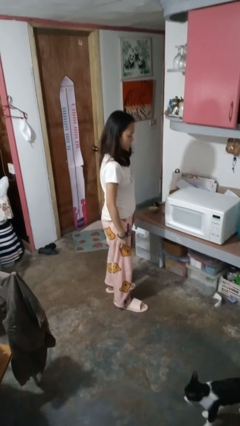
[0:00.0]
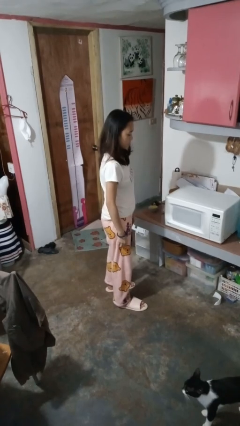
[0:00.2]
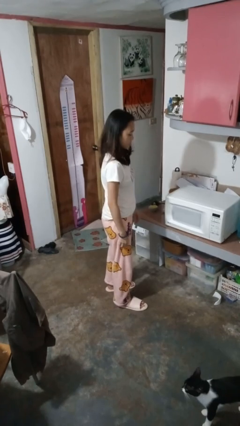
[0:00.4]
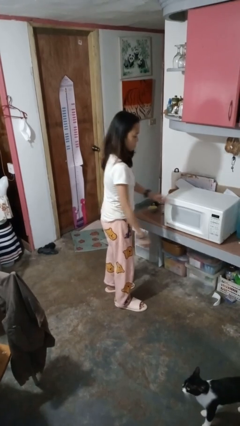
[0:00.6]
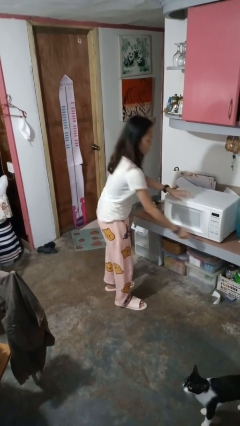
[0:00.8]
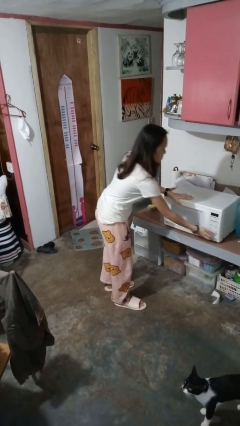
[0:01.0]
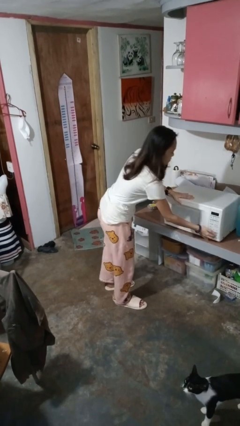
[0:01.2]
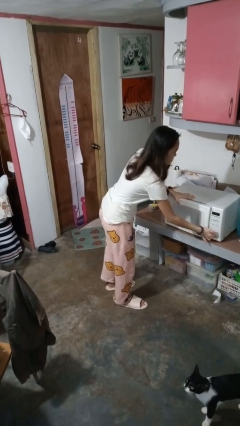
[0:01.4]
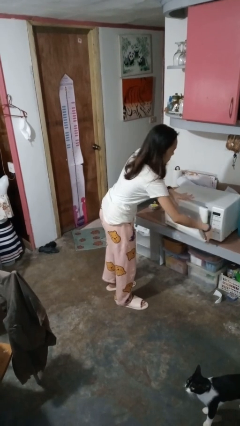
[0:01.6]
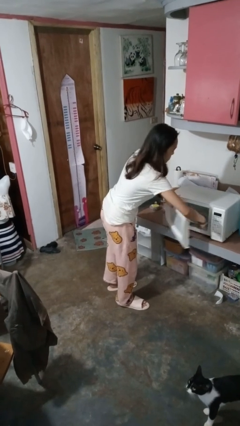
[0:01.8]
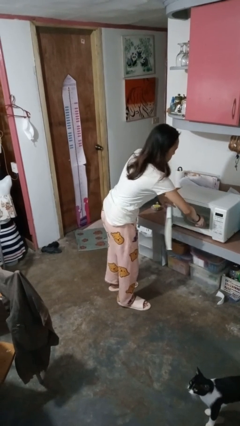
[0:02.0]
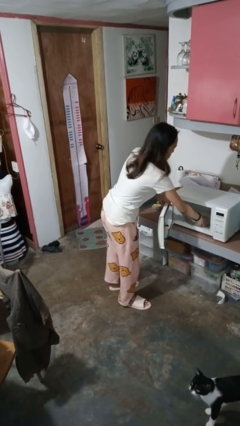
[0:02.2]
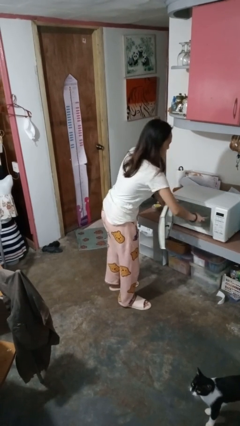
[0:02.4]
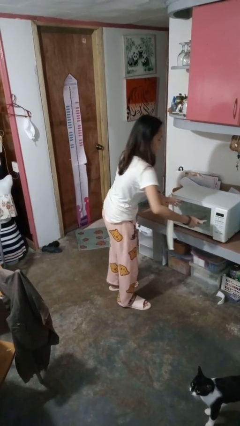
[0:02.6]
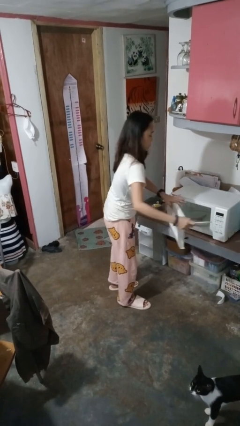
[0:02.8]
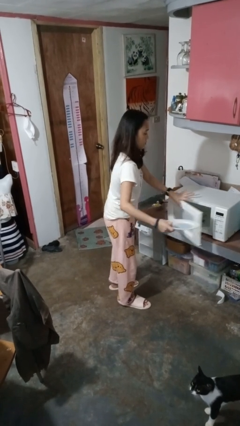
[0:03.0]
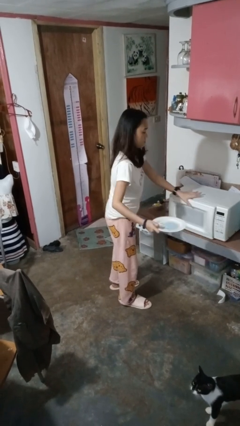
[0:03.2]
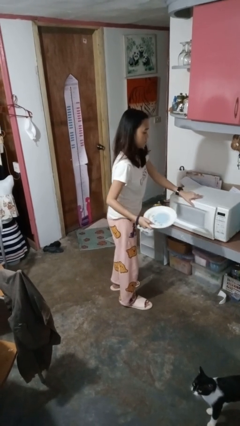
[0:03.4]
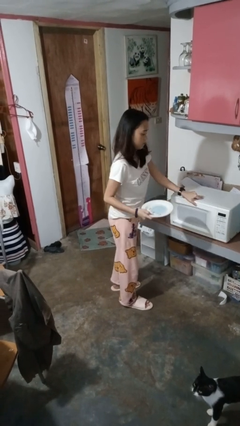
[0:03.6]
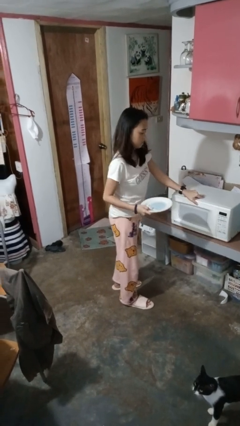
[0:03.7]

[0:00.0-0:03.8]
person takes object from microwave

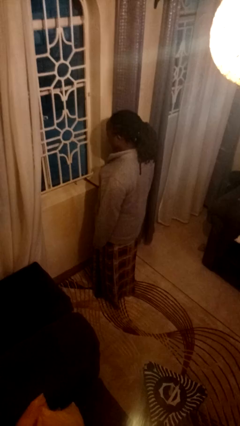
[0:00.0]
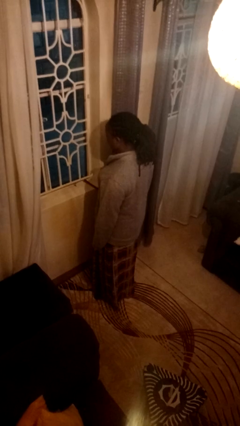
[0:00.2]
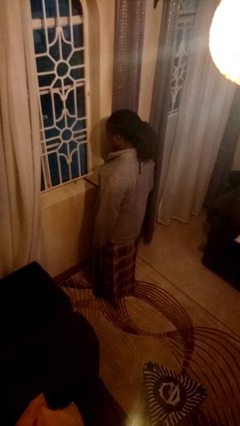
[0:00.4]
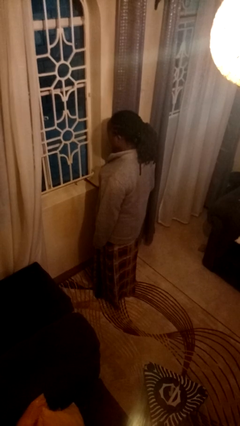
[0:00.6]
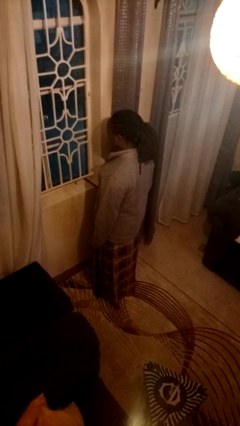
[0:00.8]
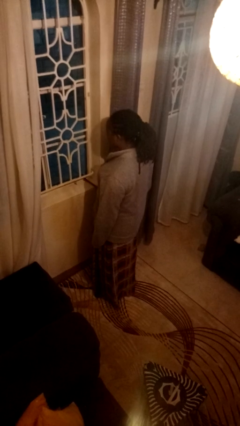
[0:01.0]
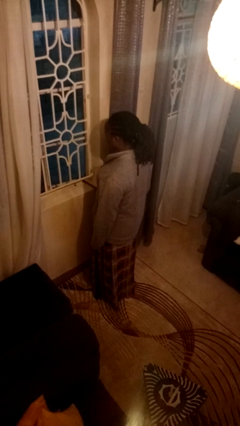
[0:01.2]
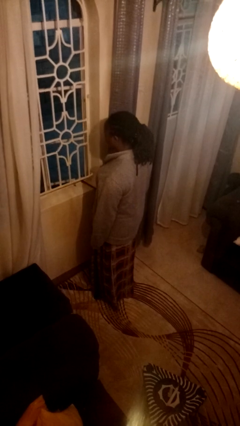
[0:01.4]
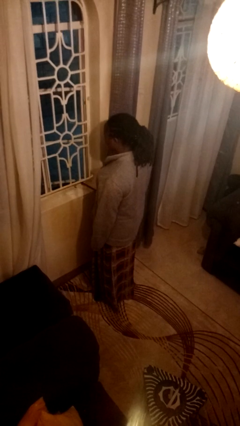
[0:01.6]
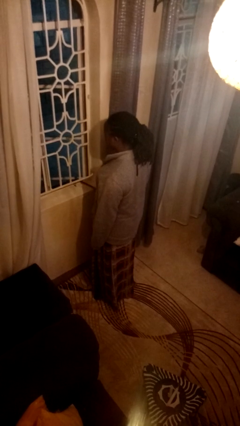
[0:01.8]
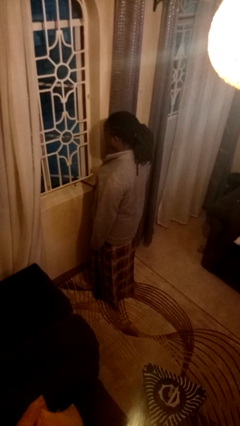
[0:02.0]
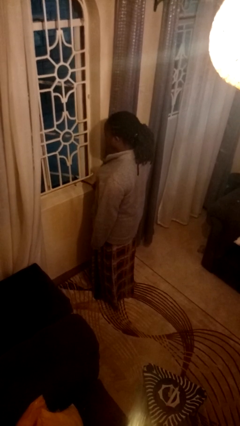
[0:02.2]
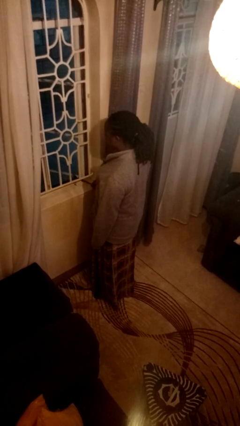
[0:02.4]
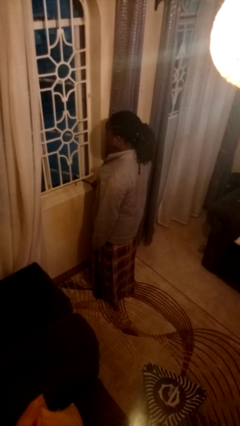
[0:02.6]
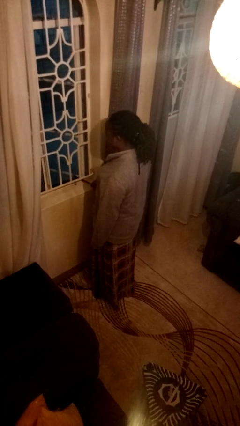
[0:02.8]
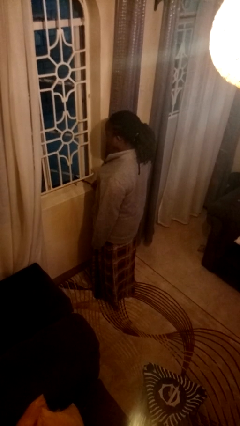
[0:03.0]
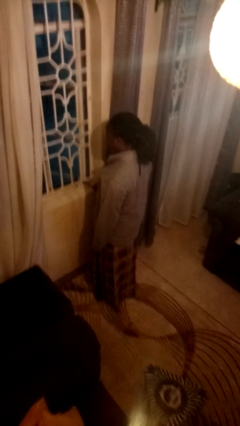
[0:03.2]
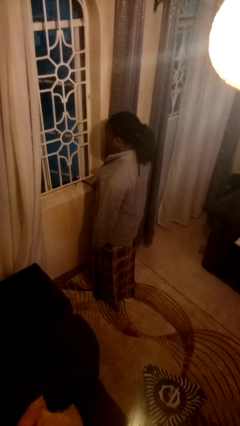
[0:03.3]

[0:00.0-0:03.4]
person opens home window

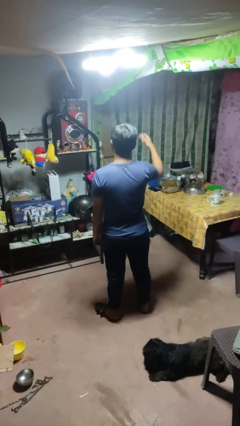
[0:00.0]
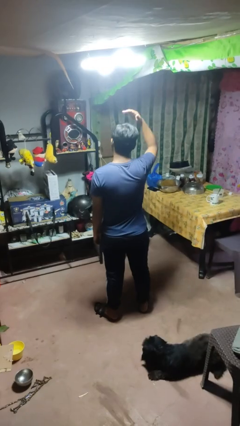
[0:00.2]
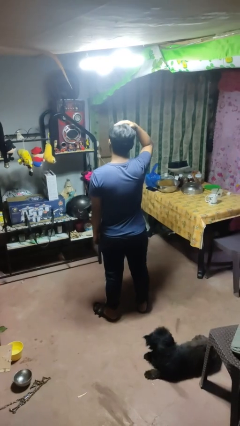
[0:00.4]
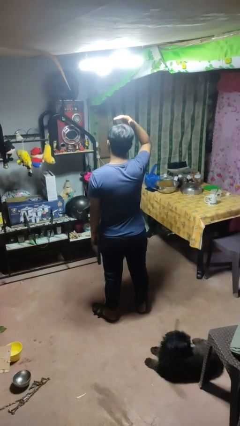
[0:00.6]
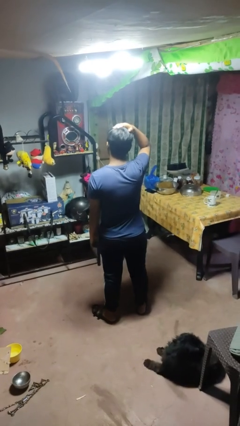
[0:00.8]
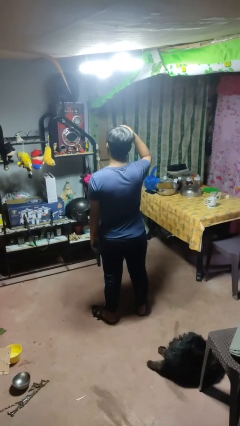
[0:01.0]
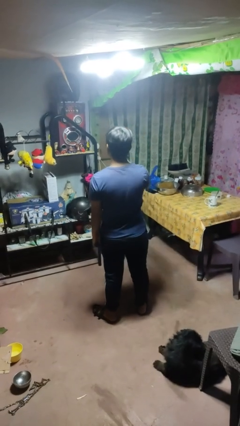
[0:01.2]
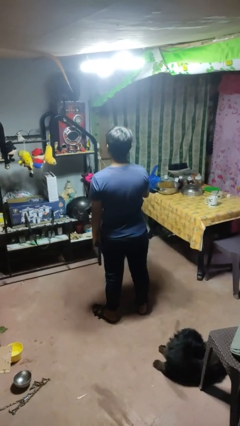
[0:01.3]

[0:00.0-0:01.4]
person pats head

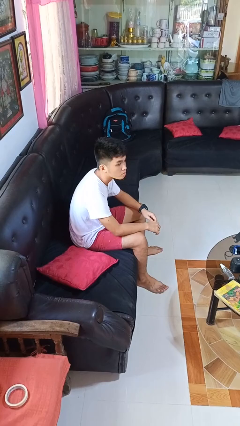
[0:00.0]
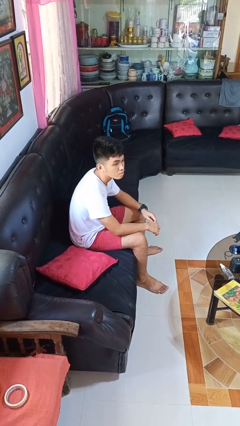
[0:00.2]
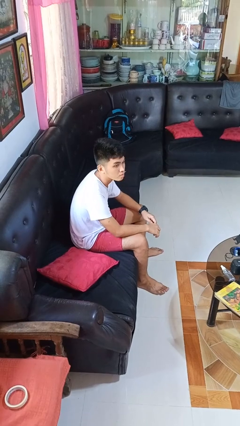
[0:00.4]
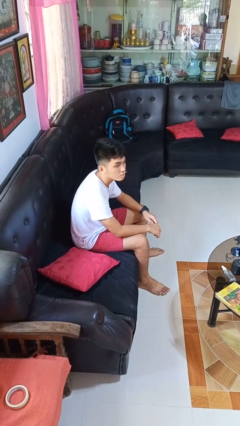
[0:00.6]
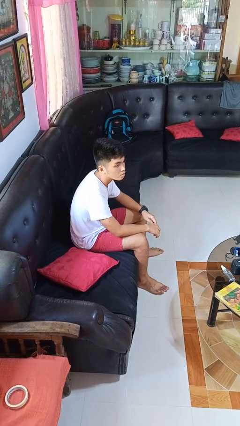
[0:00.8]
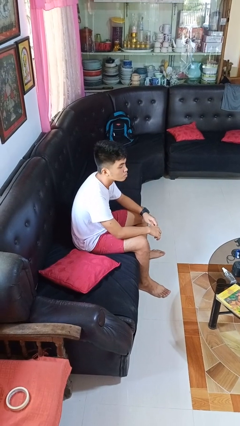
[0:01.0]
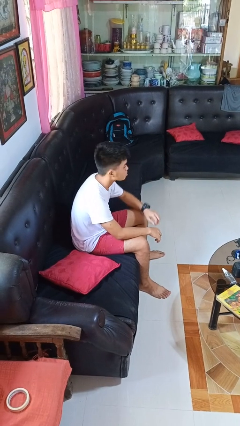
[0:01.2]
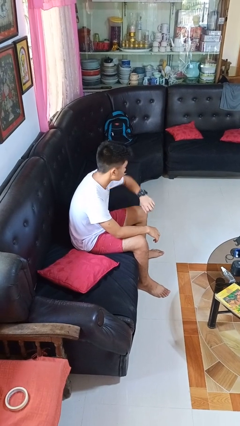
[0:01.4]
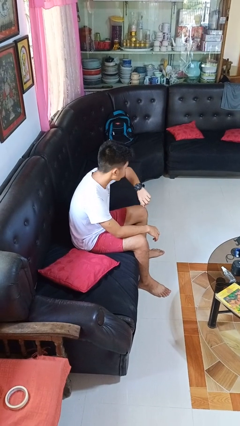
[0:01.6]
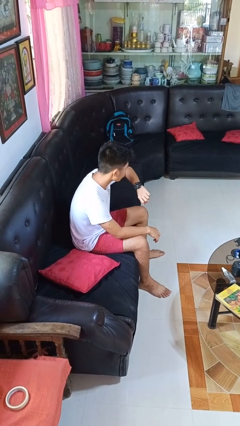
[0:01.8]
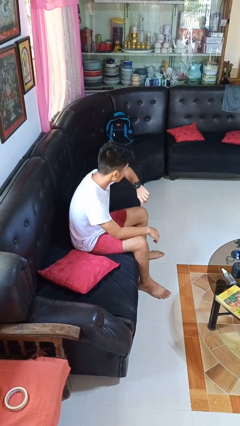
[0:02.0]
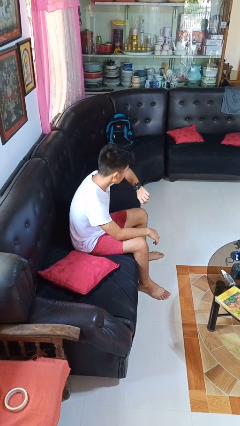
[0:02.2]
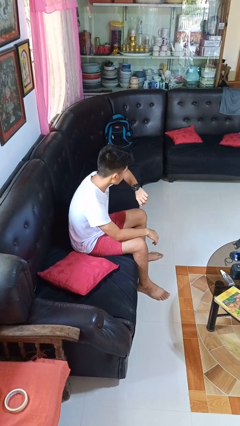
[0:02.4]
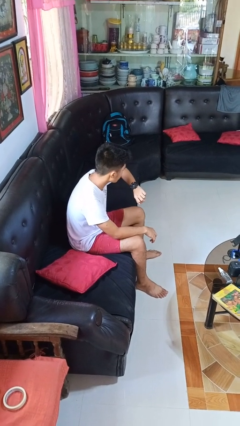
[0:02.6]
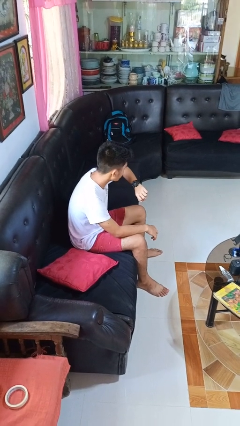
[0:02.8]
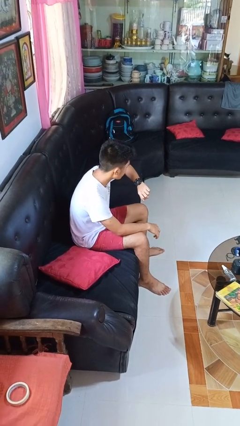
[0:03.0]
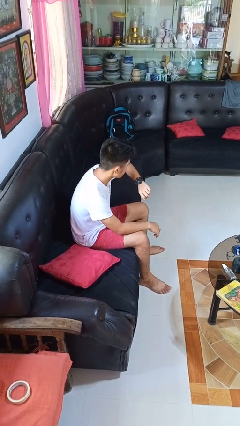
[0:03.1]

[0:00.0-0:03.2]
person looks at wristwatch

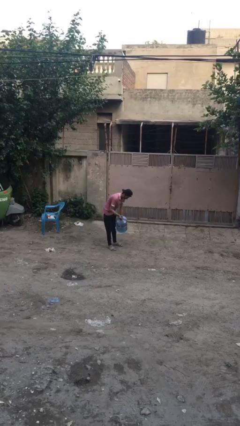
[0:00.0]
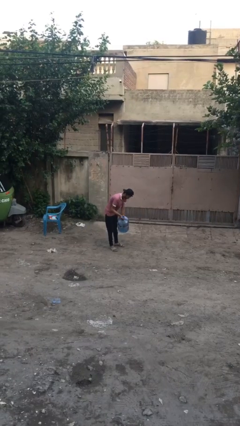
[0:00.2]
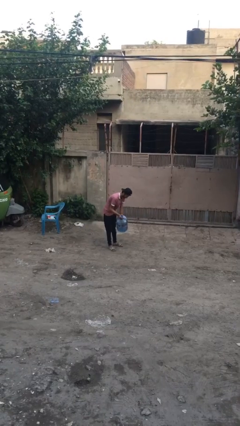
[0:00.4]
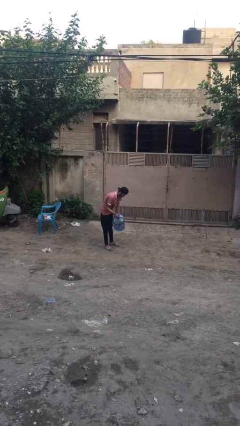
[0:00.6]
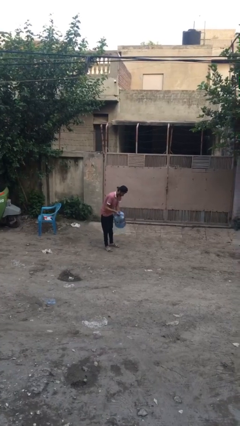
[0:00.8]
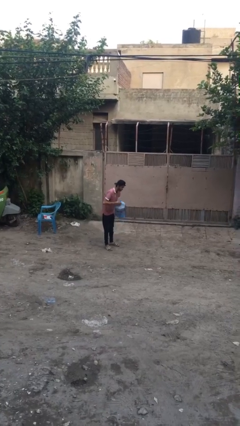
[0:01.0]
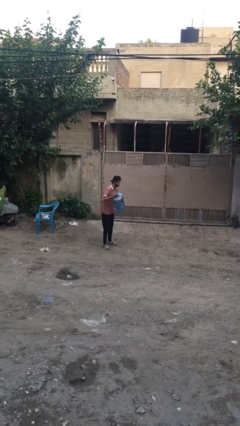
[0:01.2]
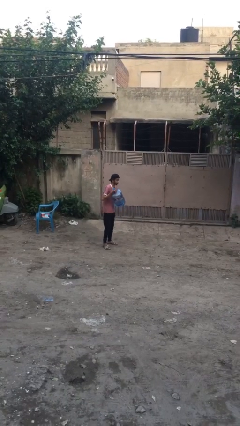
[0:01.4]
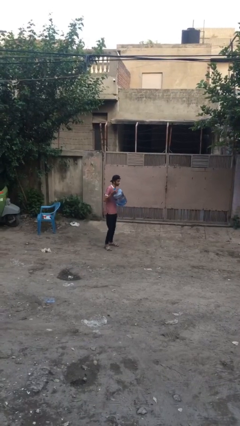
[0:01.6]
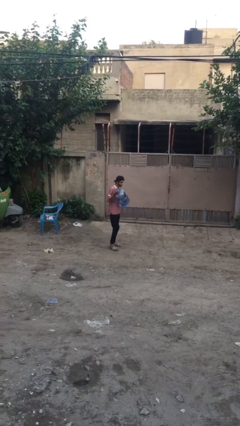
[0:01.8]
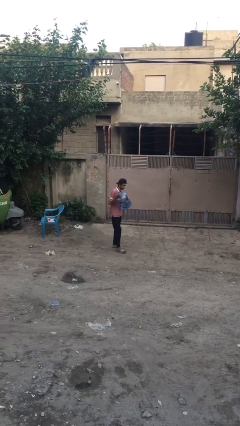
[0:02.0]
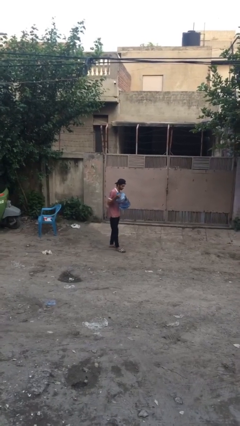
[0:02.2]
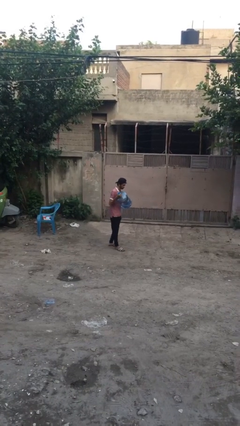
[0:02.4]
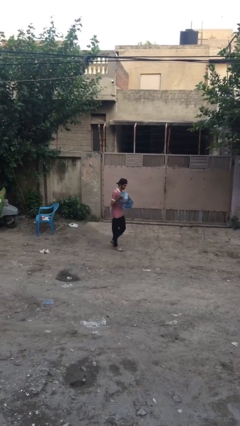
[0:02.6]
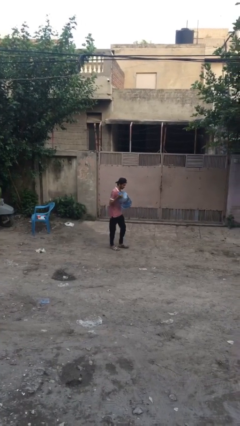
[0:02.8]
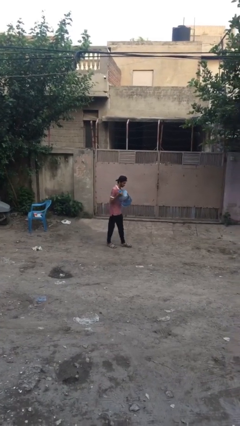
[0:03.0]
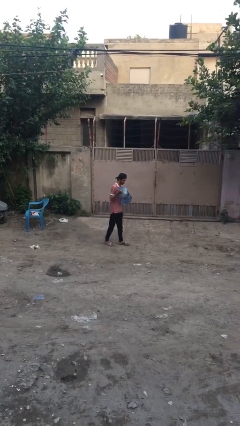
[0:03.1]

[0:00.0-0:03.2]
person carries heavy object

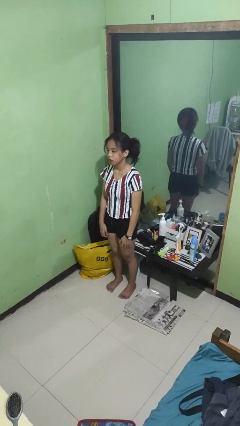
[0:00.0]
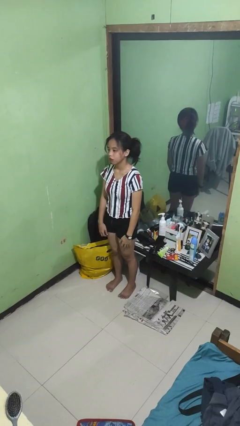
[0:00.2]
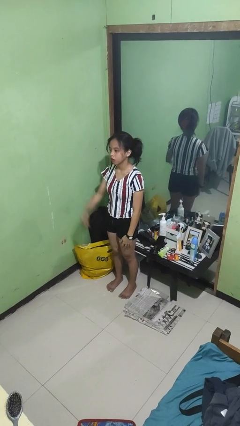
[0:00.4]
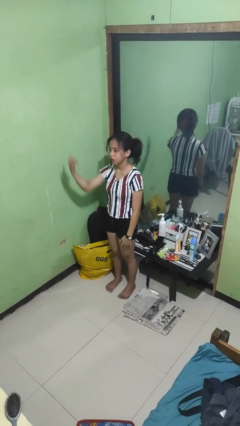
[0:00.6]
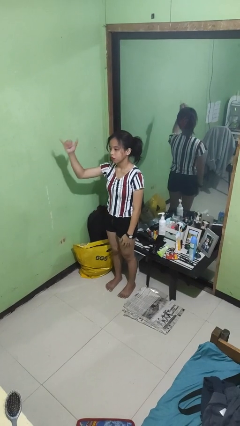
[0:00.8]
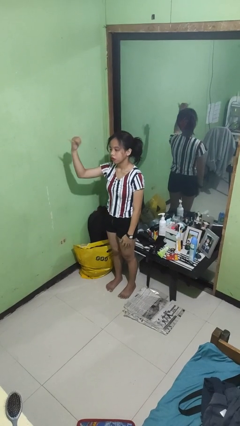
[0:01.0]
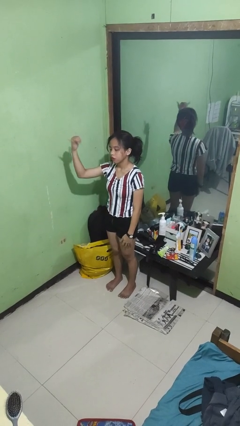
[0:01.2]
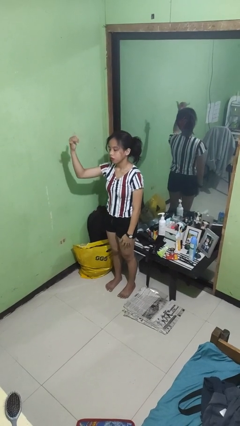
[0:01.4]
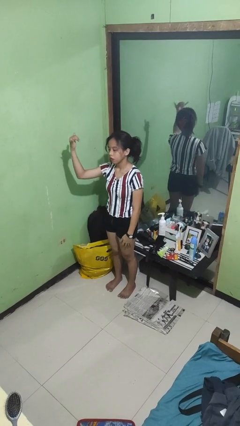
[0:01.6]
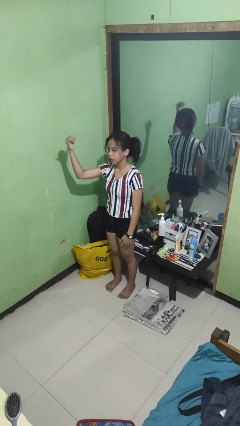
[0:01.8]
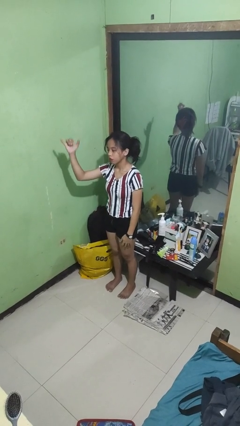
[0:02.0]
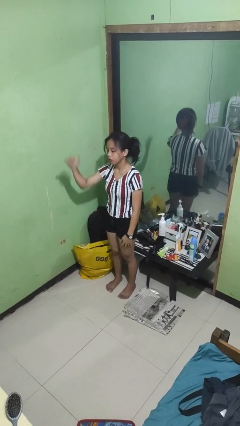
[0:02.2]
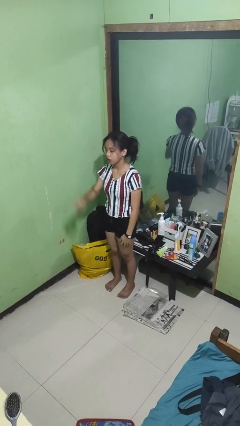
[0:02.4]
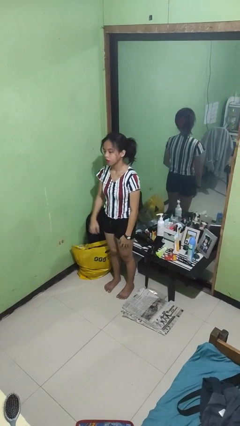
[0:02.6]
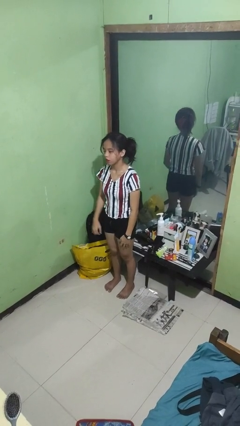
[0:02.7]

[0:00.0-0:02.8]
person gestures hang loose
